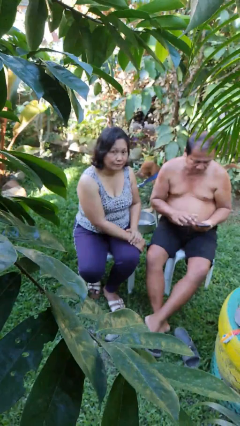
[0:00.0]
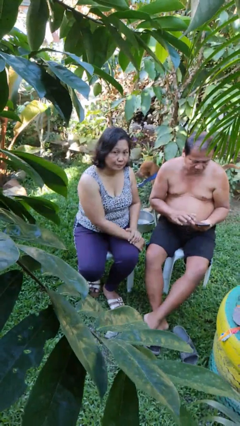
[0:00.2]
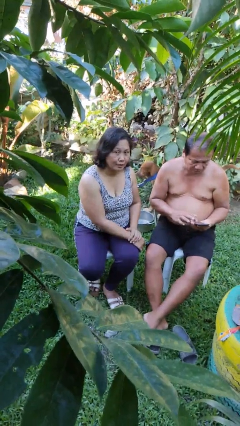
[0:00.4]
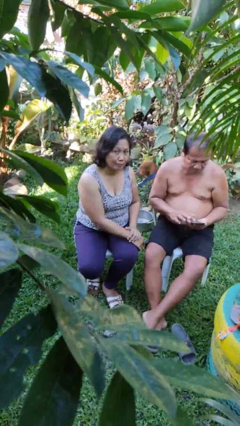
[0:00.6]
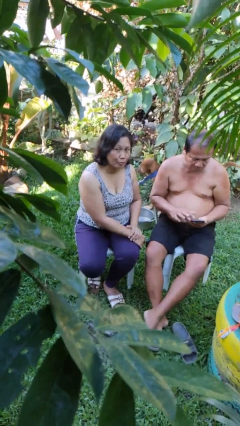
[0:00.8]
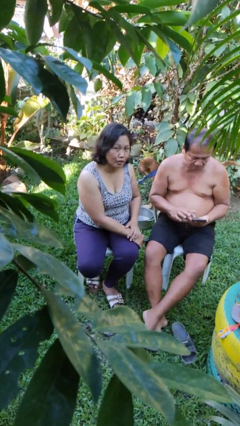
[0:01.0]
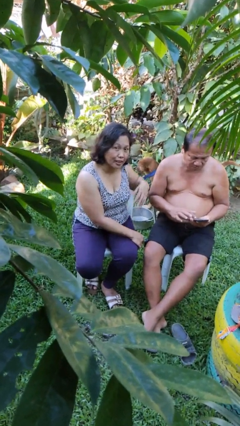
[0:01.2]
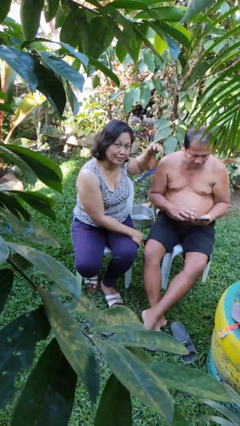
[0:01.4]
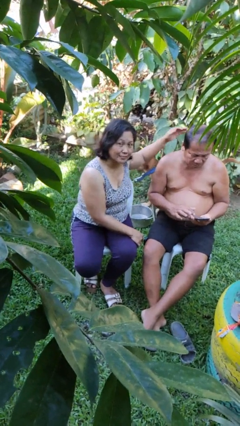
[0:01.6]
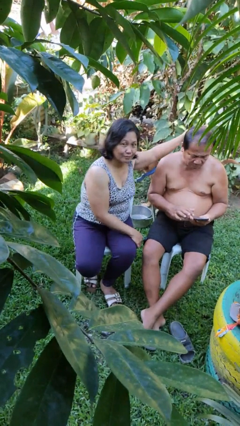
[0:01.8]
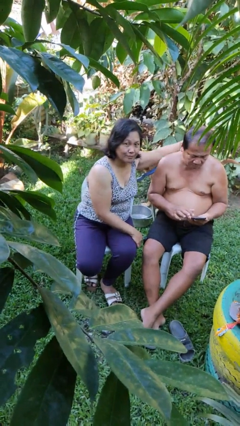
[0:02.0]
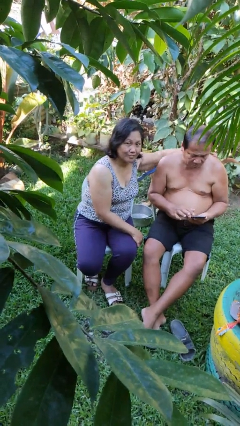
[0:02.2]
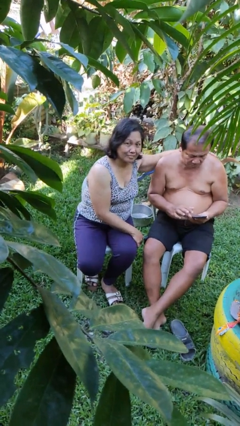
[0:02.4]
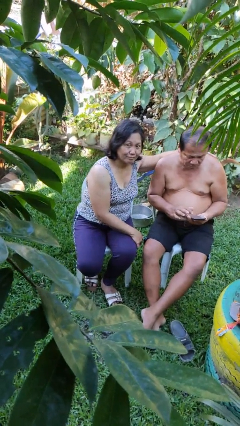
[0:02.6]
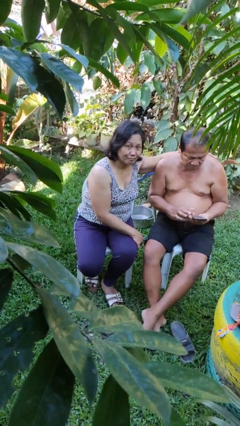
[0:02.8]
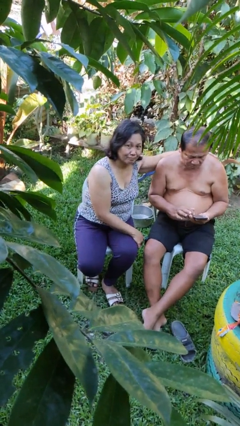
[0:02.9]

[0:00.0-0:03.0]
person touches back of person

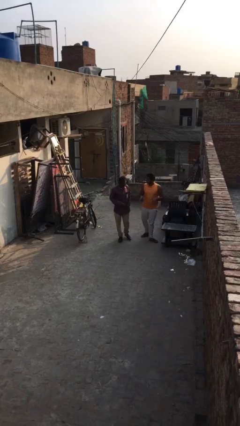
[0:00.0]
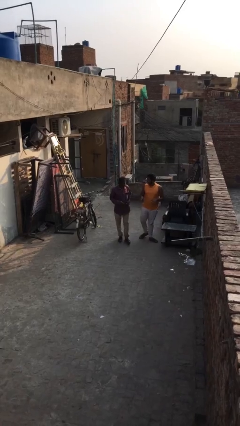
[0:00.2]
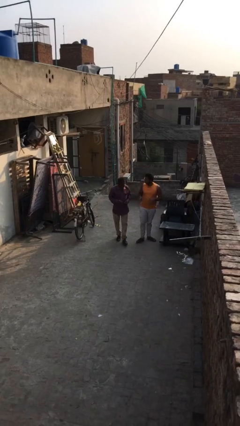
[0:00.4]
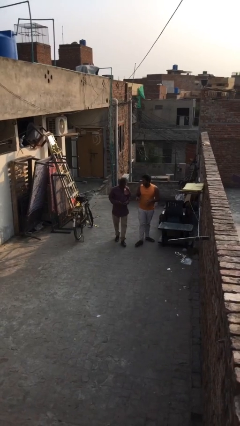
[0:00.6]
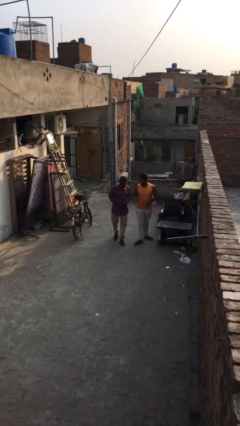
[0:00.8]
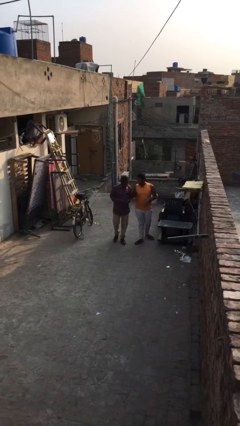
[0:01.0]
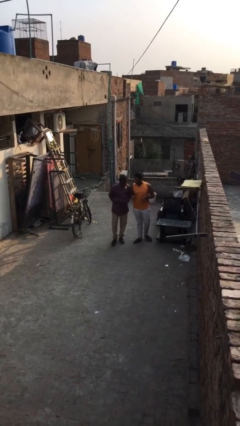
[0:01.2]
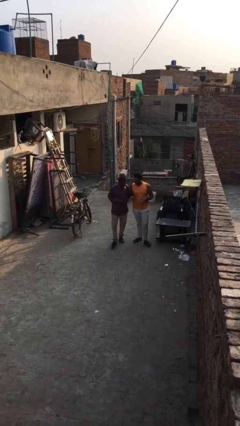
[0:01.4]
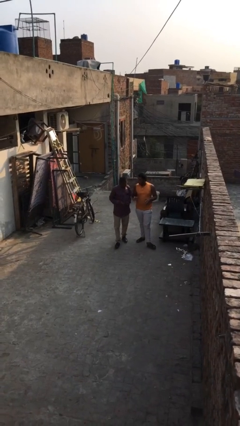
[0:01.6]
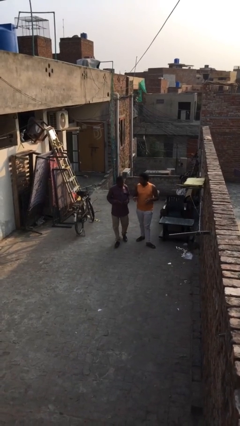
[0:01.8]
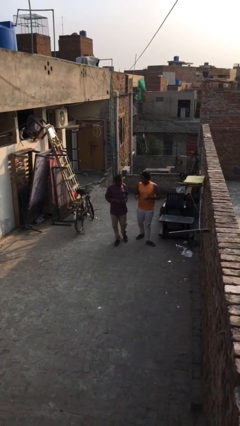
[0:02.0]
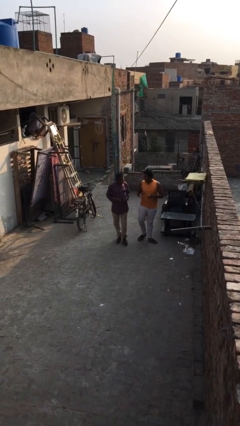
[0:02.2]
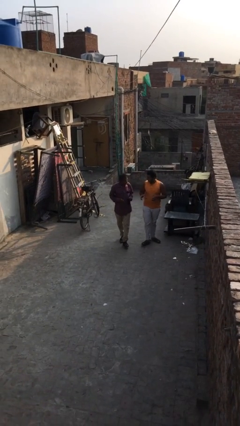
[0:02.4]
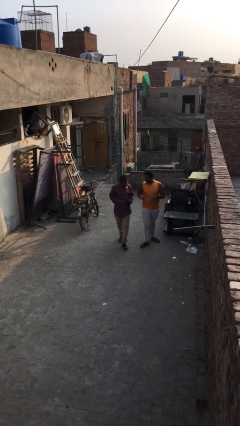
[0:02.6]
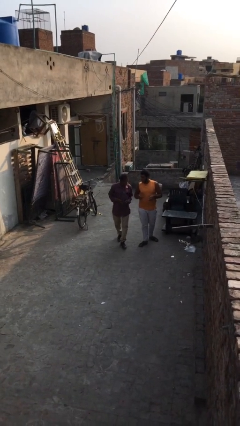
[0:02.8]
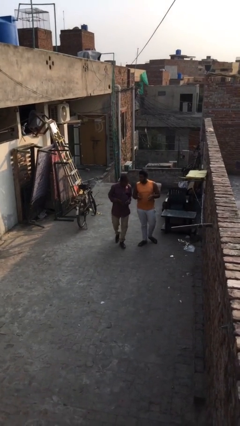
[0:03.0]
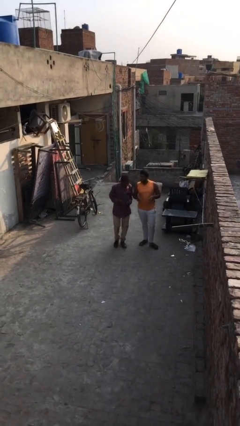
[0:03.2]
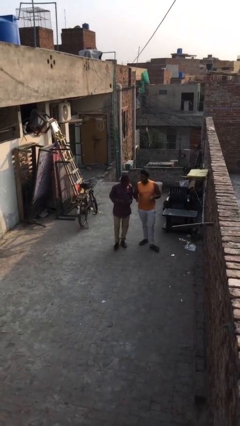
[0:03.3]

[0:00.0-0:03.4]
person talks to person

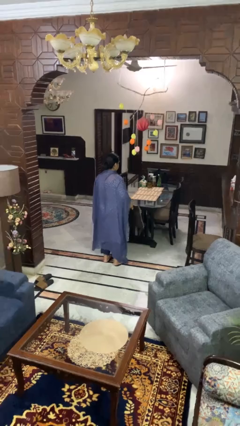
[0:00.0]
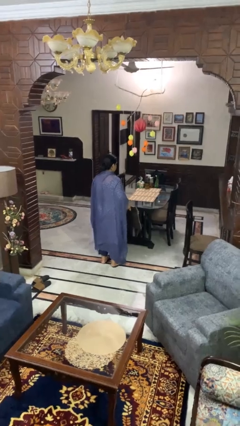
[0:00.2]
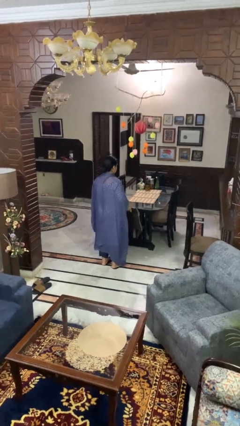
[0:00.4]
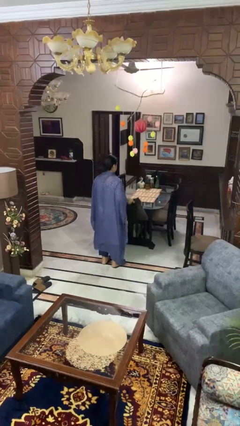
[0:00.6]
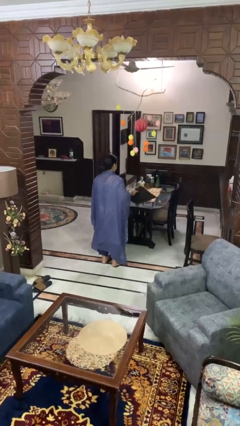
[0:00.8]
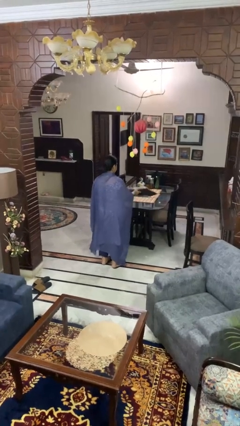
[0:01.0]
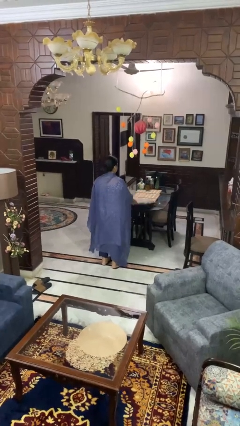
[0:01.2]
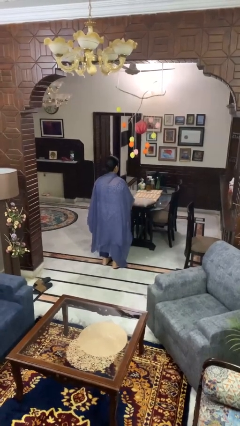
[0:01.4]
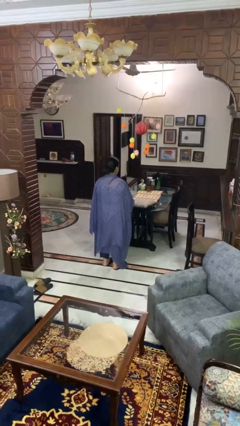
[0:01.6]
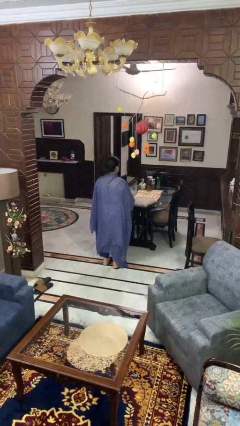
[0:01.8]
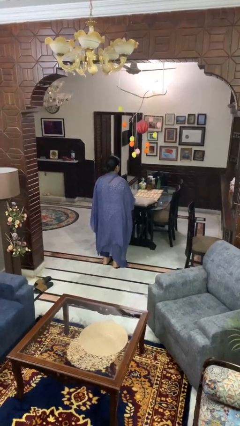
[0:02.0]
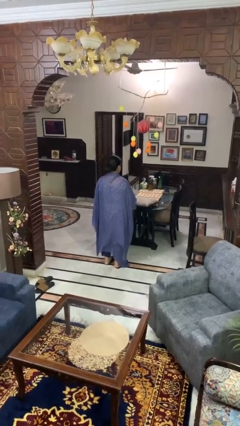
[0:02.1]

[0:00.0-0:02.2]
person throws object on table

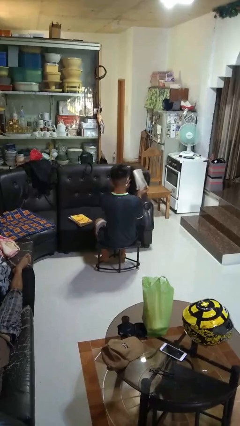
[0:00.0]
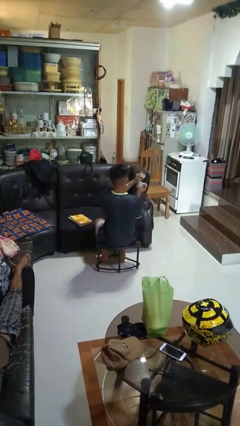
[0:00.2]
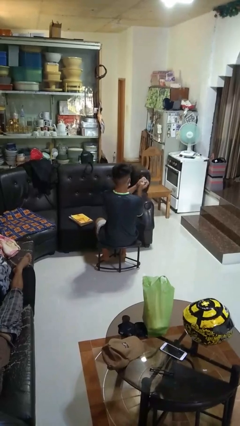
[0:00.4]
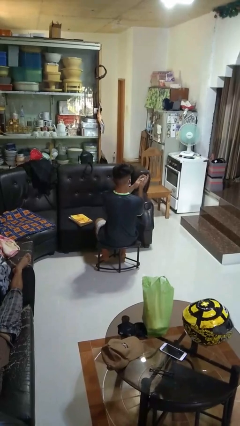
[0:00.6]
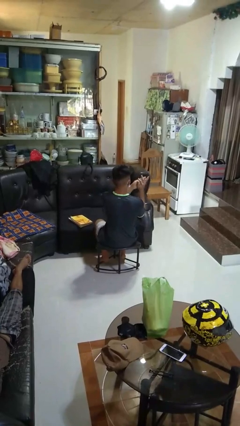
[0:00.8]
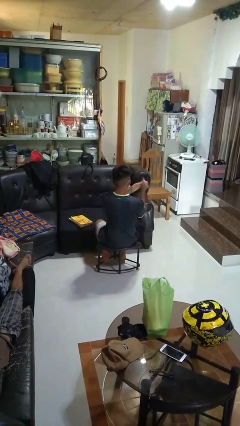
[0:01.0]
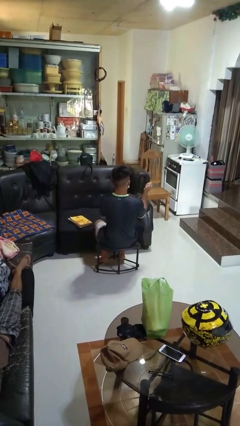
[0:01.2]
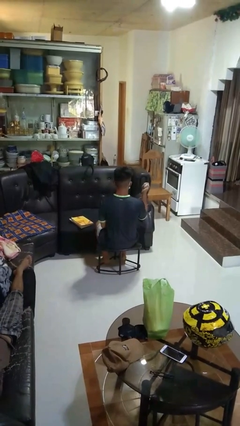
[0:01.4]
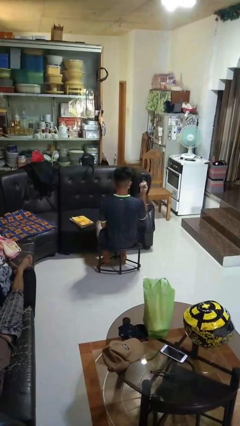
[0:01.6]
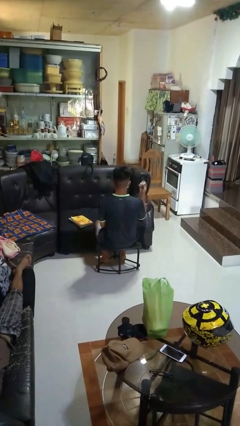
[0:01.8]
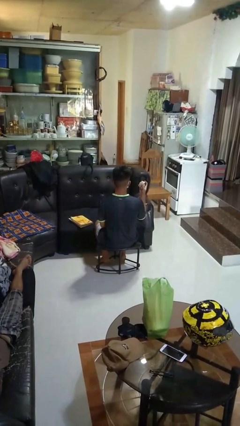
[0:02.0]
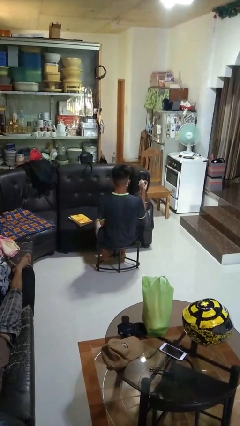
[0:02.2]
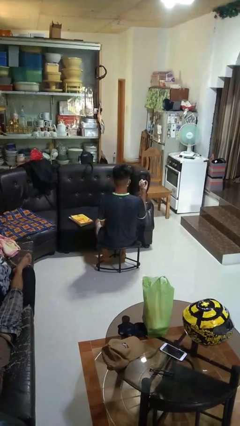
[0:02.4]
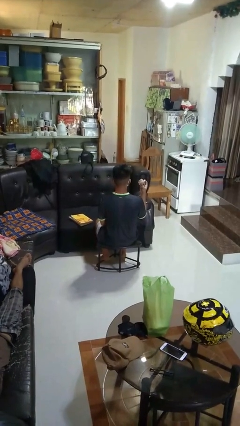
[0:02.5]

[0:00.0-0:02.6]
person crumples paper

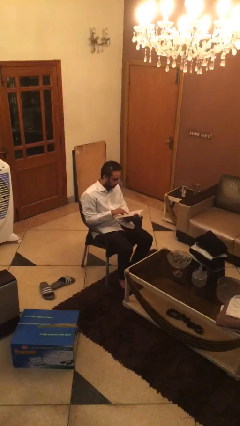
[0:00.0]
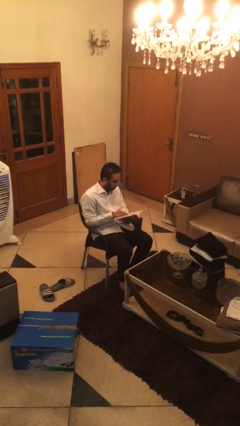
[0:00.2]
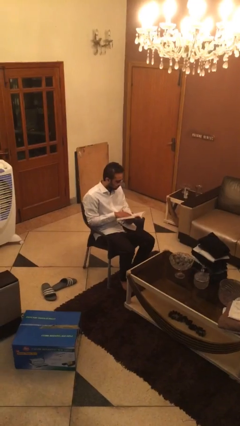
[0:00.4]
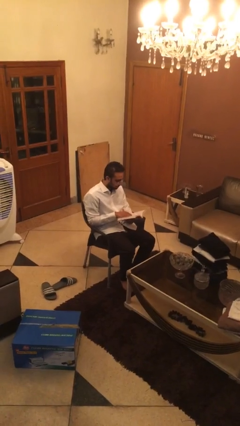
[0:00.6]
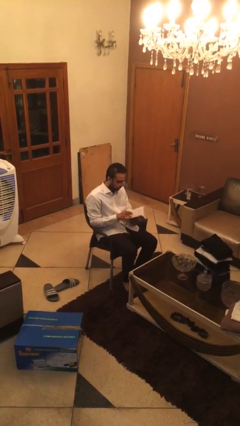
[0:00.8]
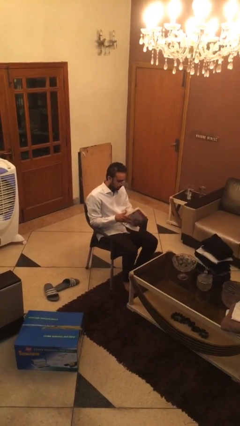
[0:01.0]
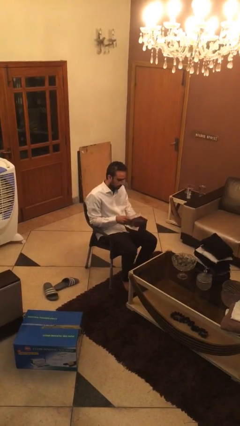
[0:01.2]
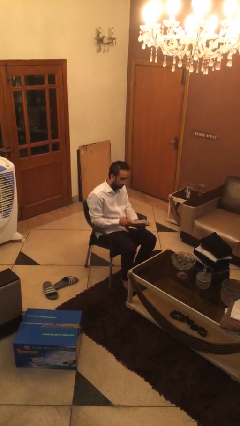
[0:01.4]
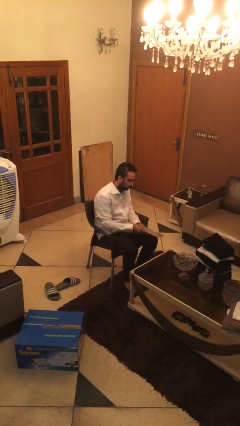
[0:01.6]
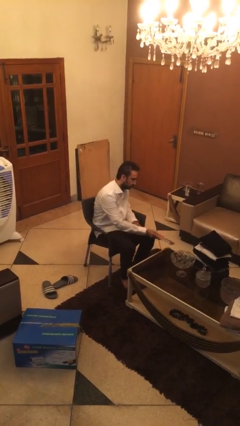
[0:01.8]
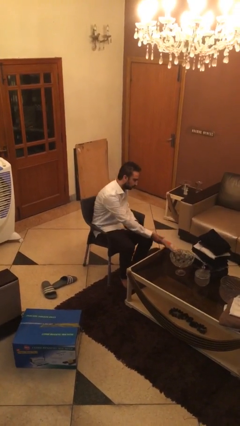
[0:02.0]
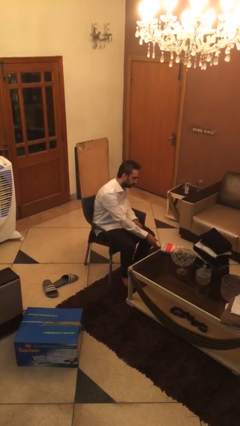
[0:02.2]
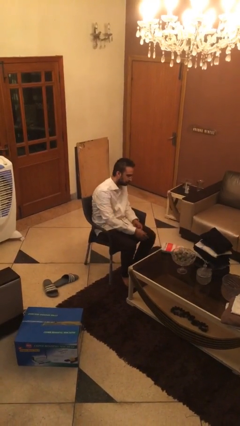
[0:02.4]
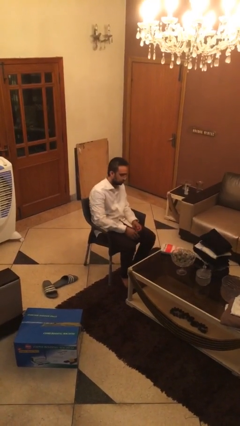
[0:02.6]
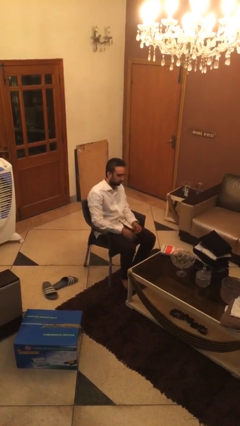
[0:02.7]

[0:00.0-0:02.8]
person puts down object on table

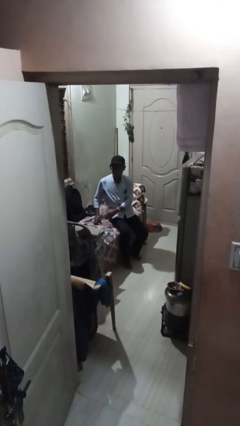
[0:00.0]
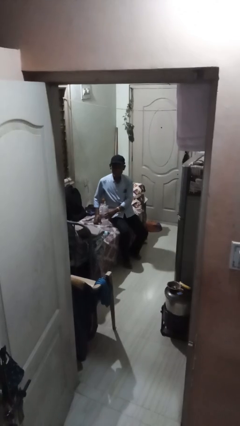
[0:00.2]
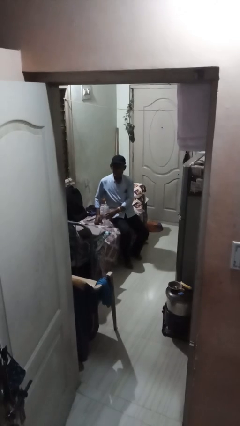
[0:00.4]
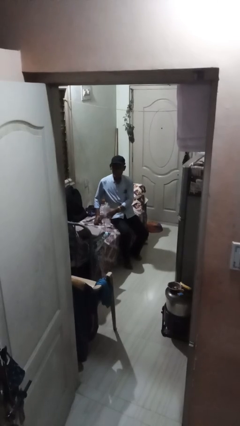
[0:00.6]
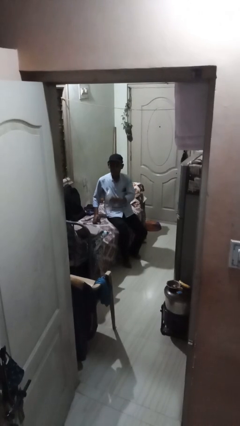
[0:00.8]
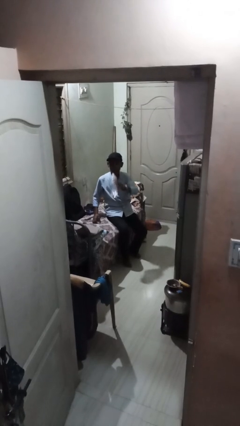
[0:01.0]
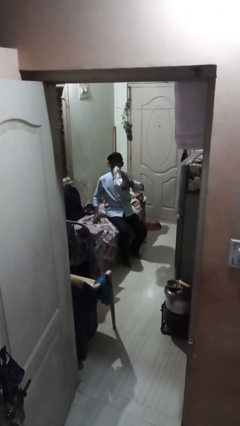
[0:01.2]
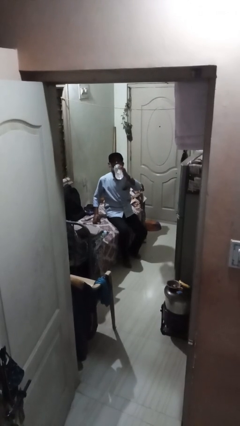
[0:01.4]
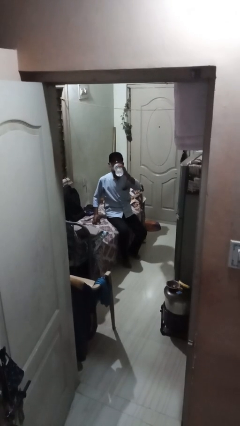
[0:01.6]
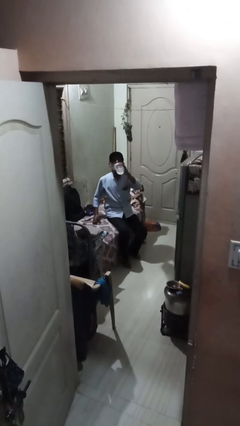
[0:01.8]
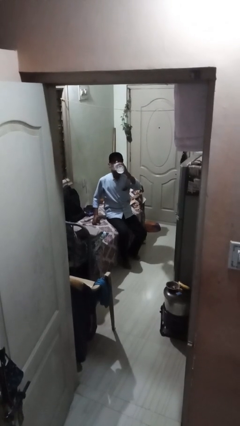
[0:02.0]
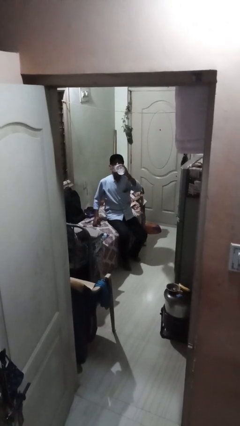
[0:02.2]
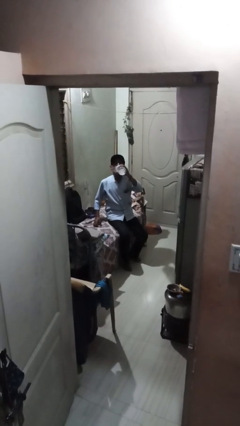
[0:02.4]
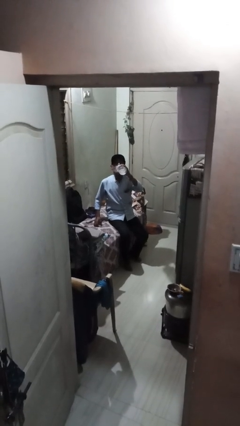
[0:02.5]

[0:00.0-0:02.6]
person drinks from bottle

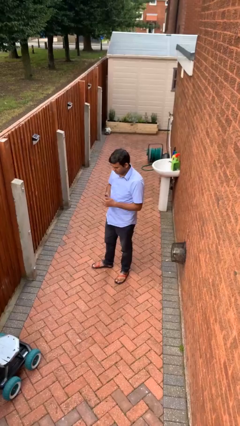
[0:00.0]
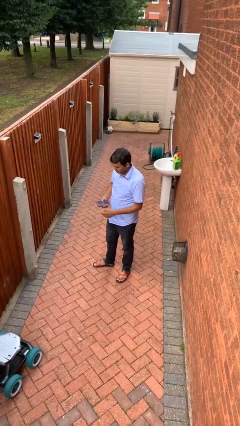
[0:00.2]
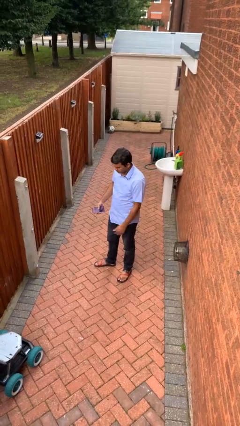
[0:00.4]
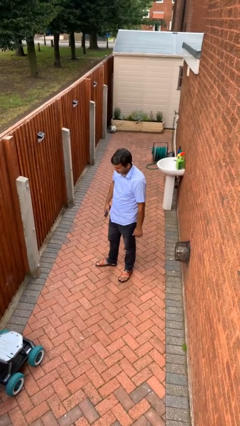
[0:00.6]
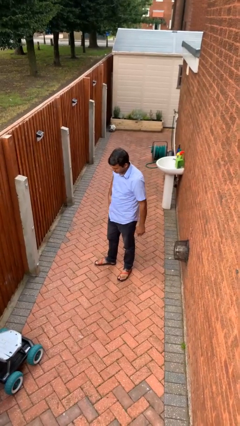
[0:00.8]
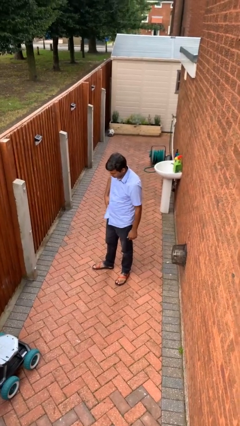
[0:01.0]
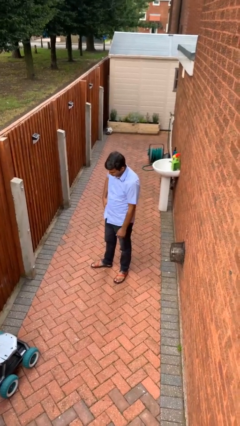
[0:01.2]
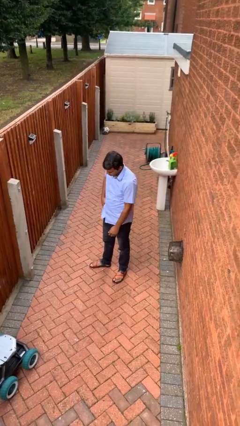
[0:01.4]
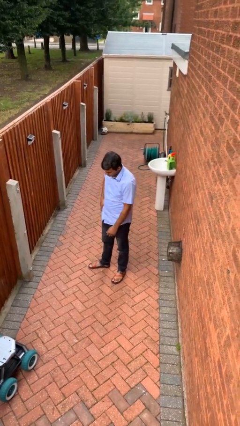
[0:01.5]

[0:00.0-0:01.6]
person puts phone into pocket
